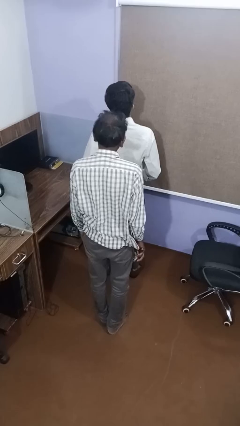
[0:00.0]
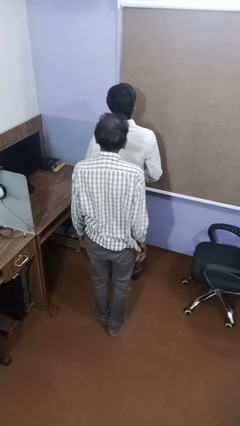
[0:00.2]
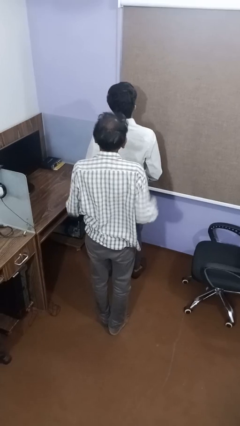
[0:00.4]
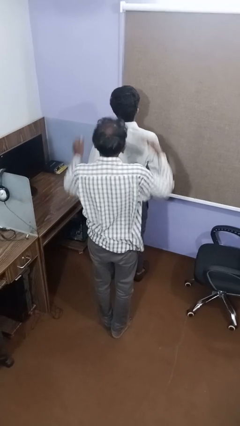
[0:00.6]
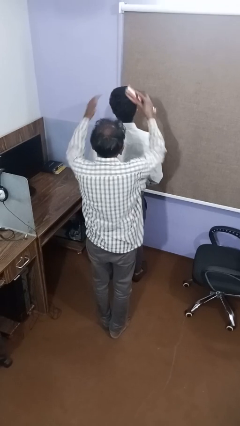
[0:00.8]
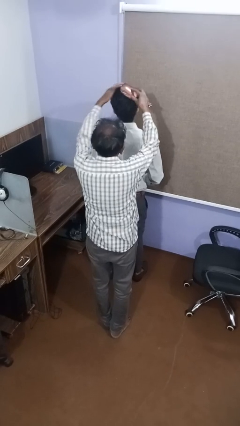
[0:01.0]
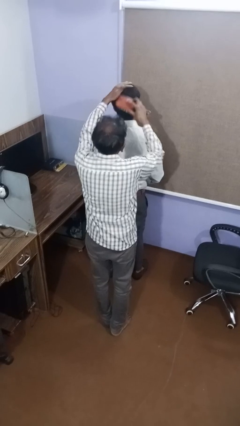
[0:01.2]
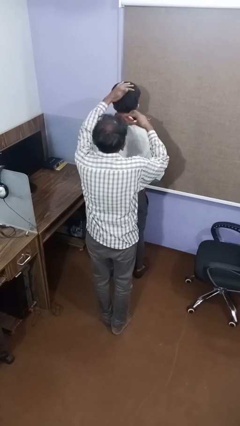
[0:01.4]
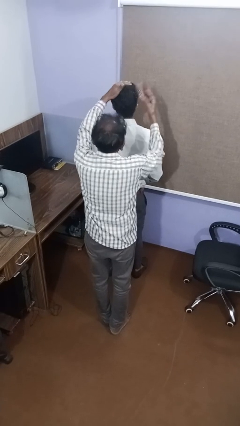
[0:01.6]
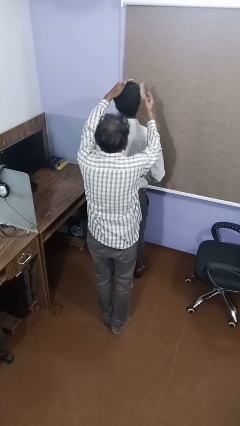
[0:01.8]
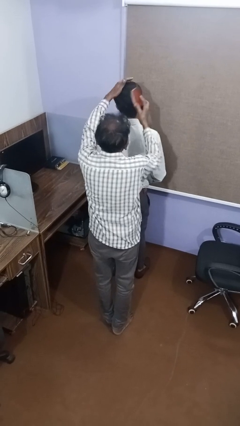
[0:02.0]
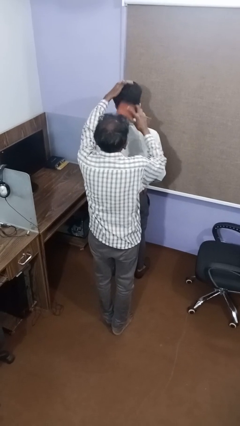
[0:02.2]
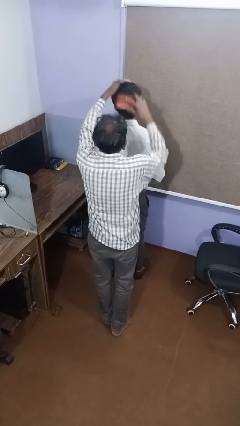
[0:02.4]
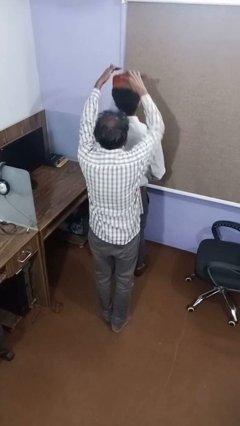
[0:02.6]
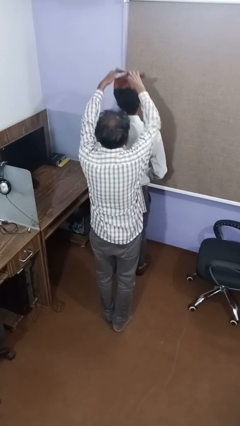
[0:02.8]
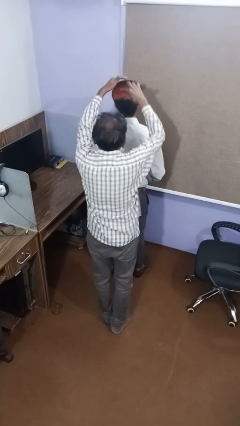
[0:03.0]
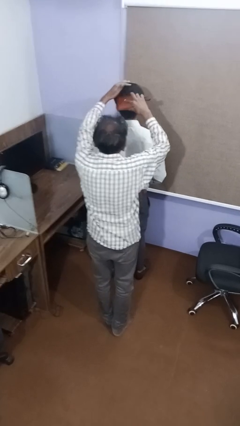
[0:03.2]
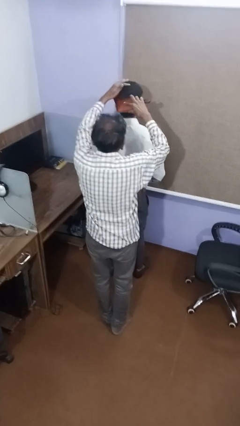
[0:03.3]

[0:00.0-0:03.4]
person brushes hair of person

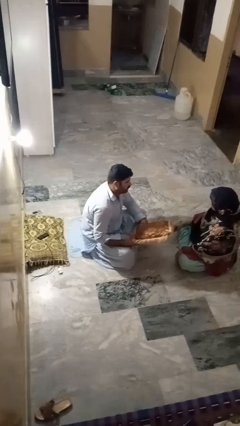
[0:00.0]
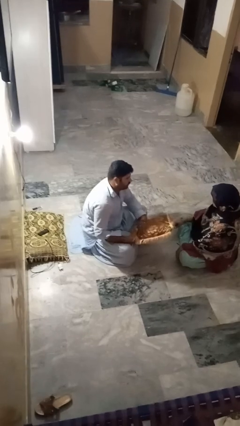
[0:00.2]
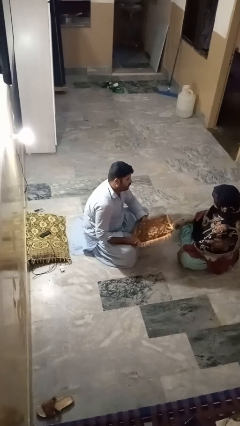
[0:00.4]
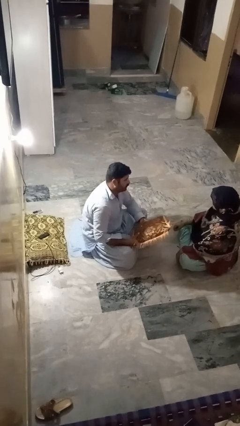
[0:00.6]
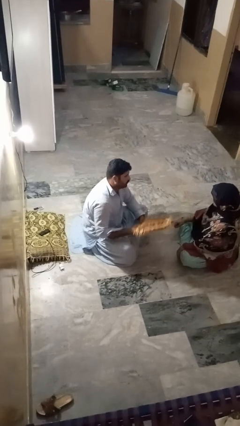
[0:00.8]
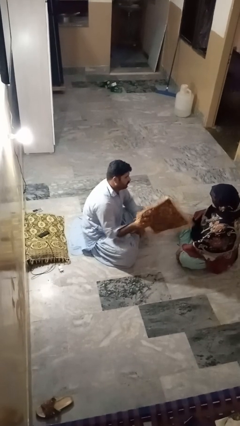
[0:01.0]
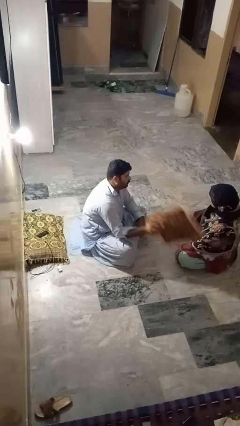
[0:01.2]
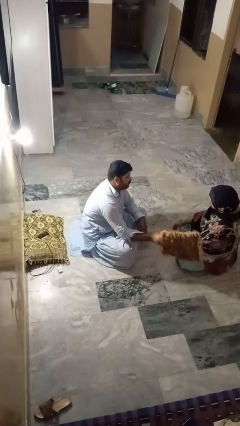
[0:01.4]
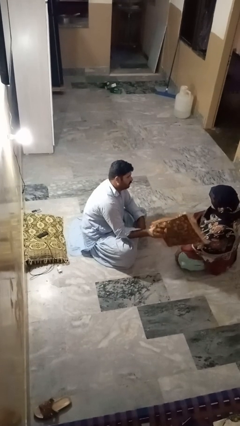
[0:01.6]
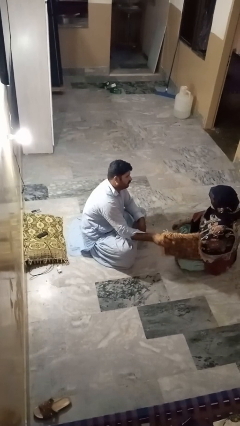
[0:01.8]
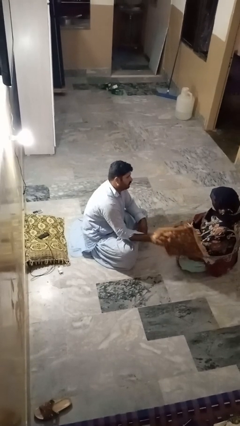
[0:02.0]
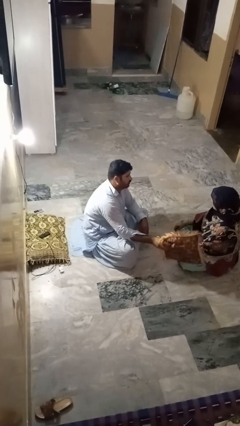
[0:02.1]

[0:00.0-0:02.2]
person hits person with pillow

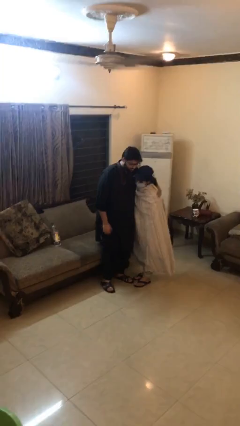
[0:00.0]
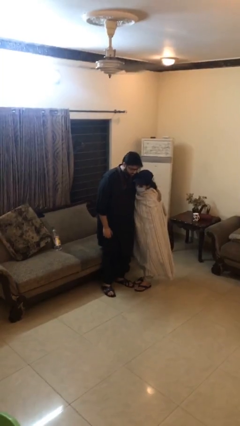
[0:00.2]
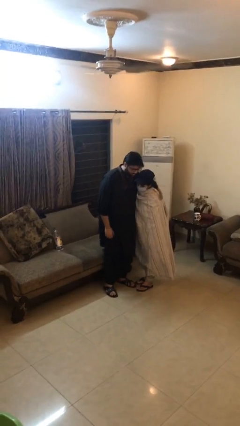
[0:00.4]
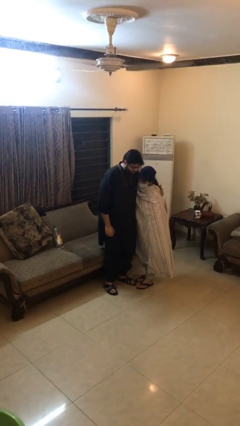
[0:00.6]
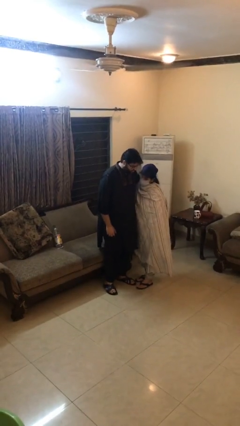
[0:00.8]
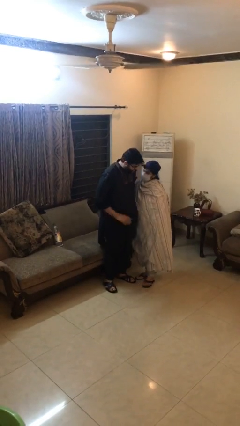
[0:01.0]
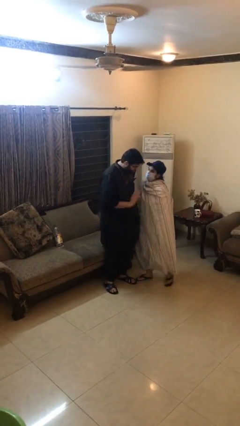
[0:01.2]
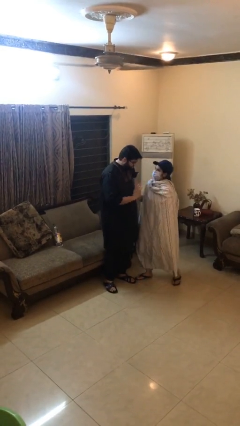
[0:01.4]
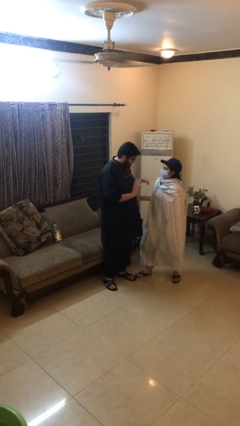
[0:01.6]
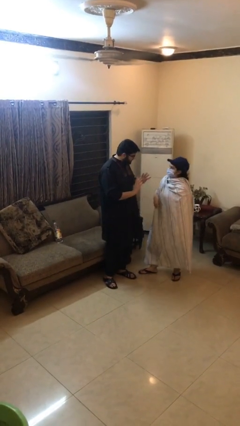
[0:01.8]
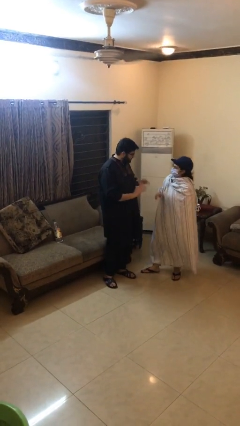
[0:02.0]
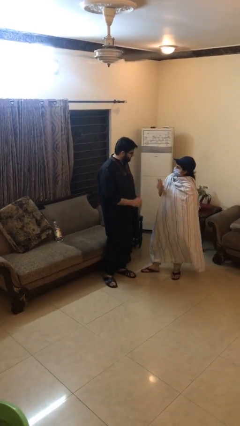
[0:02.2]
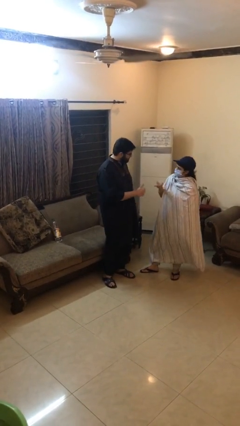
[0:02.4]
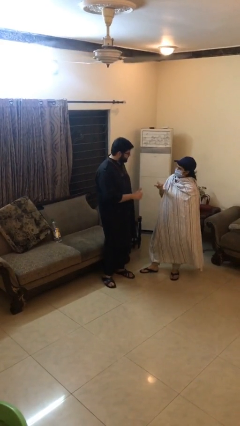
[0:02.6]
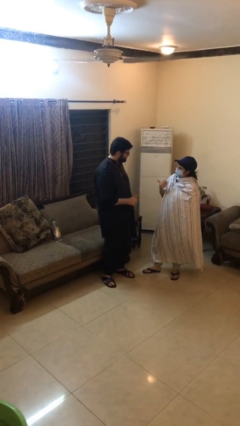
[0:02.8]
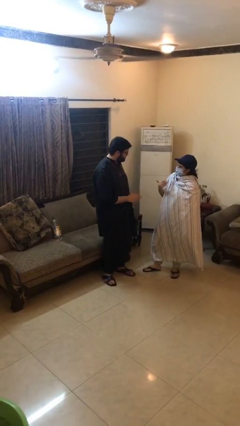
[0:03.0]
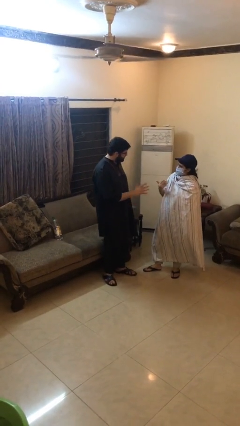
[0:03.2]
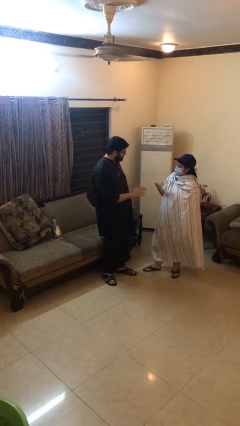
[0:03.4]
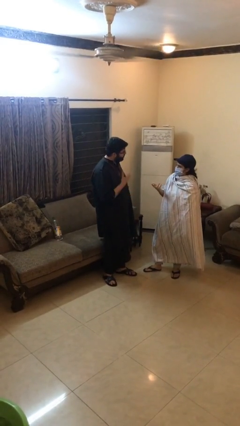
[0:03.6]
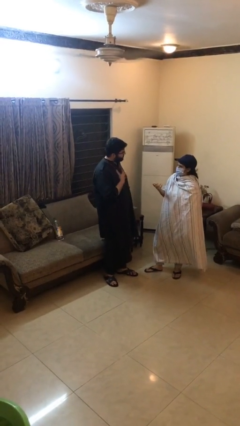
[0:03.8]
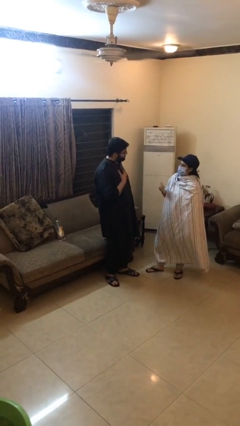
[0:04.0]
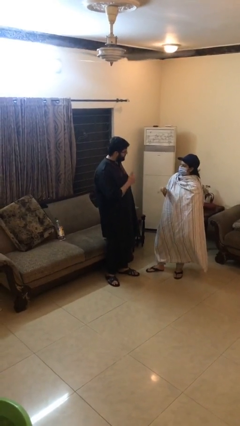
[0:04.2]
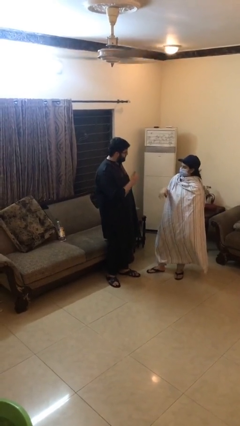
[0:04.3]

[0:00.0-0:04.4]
person talks to person

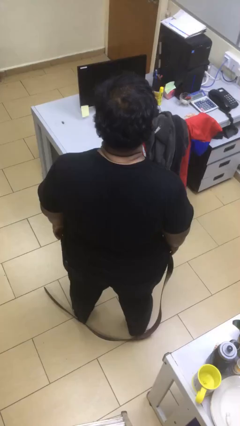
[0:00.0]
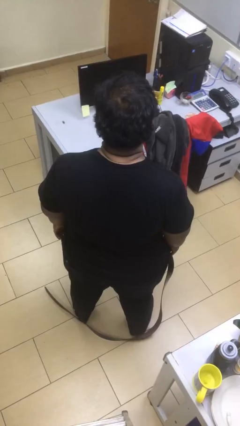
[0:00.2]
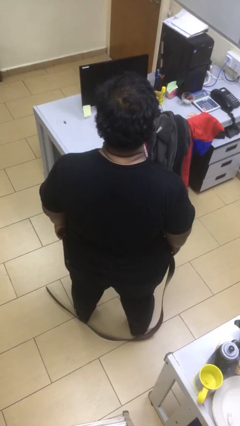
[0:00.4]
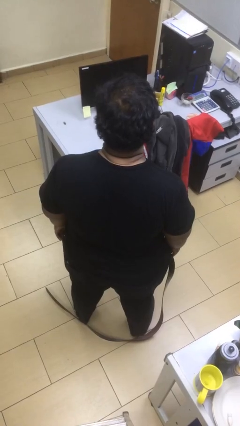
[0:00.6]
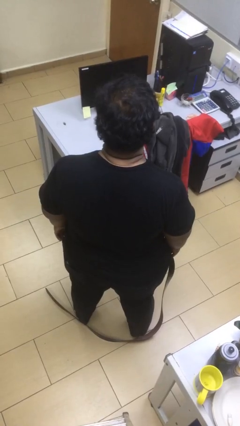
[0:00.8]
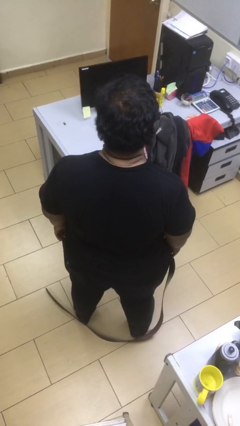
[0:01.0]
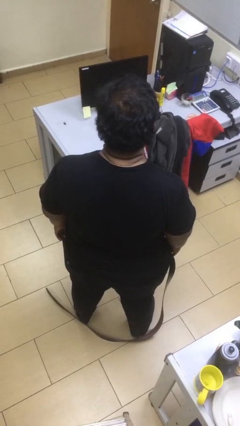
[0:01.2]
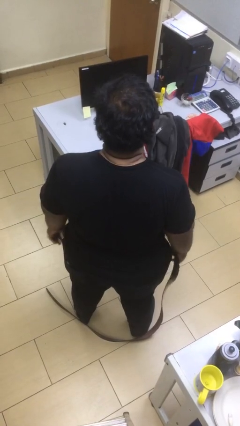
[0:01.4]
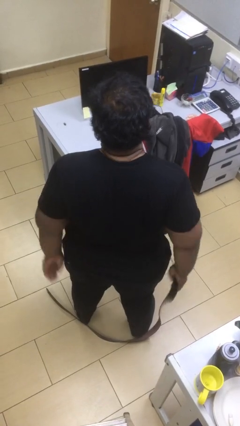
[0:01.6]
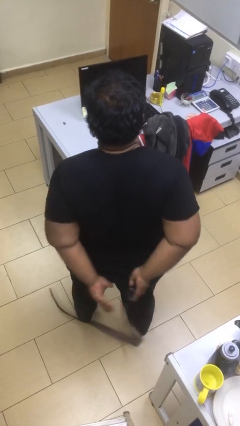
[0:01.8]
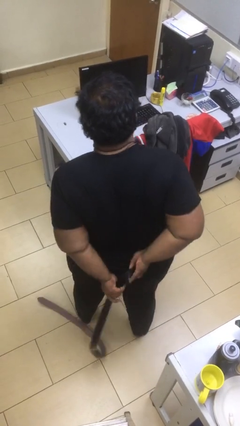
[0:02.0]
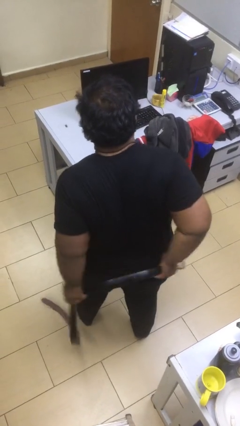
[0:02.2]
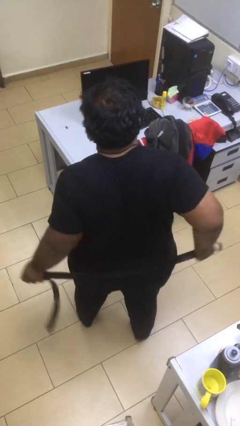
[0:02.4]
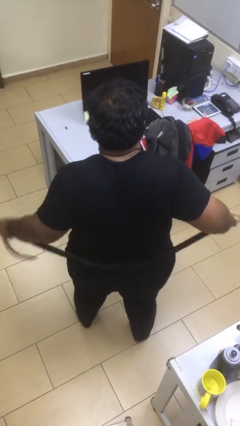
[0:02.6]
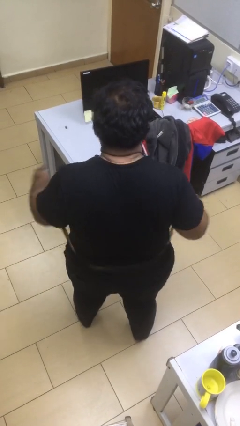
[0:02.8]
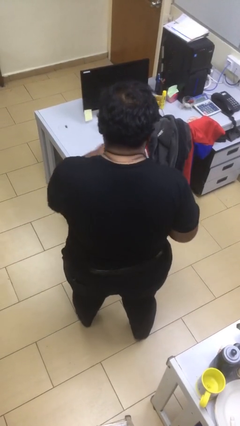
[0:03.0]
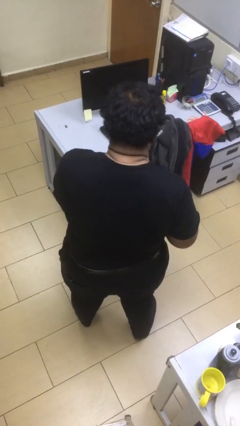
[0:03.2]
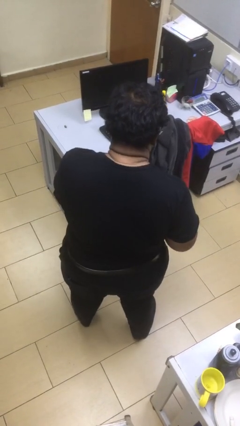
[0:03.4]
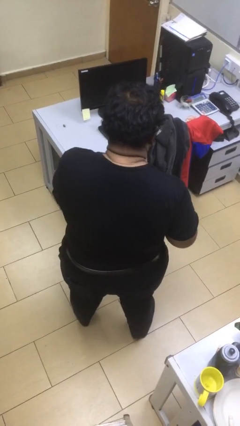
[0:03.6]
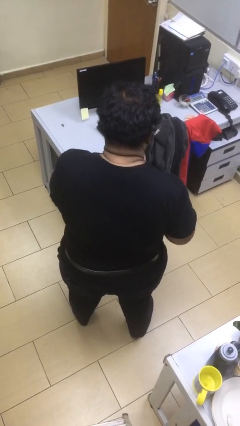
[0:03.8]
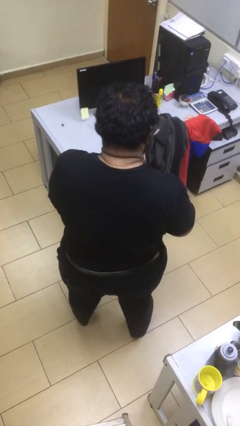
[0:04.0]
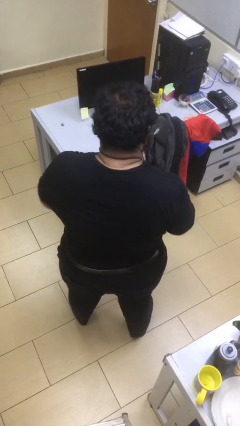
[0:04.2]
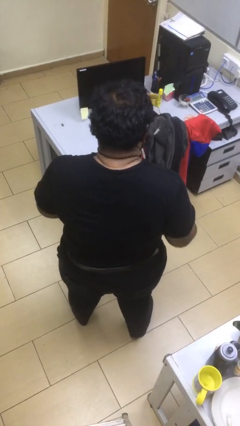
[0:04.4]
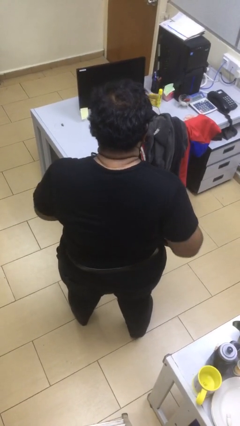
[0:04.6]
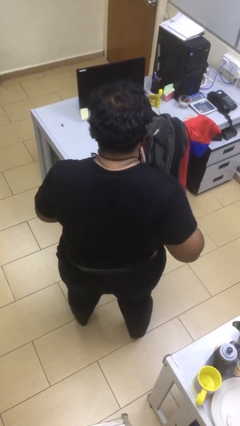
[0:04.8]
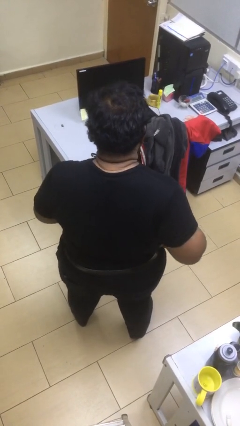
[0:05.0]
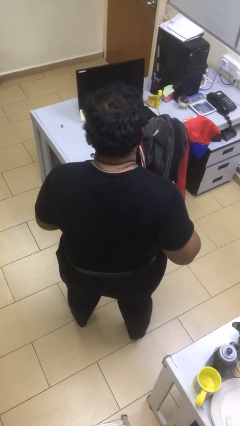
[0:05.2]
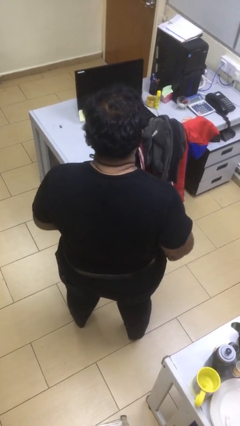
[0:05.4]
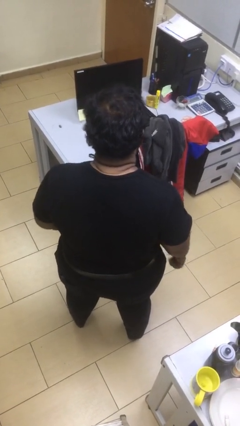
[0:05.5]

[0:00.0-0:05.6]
person puts on belt

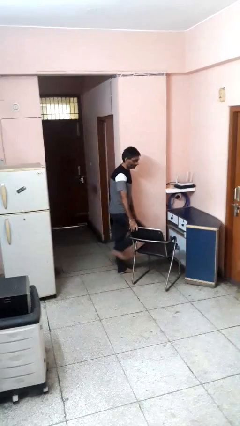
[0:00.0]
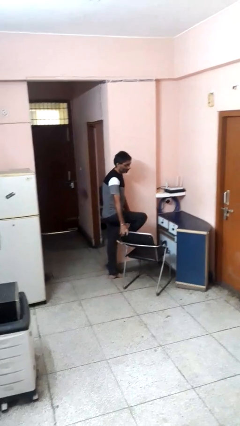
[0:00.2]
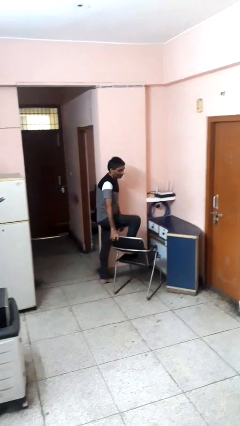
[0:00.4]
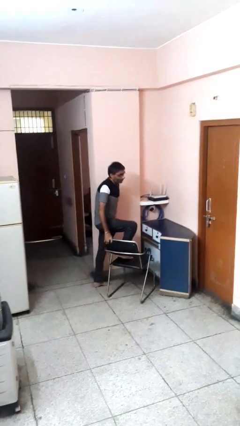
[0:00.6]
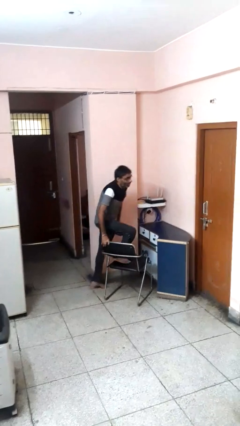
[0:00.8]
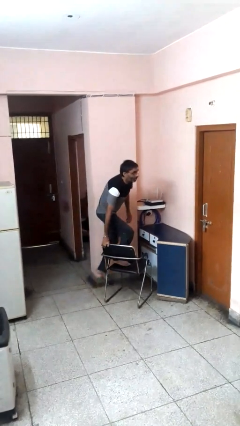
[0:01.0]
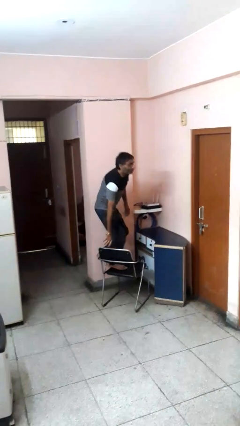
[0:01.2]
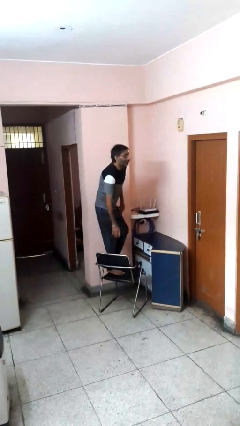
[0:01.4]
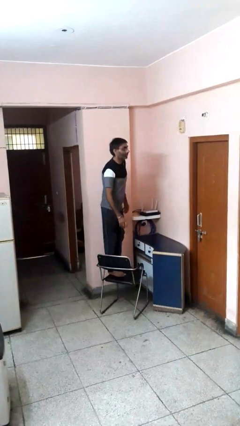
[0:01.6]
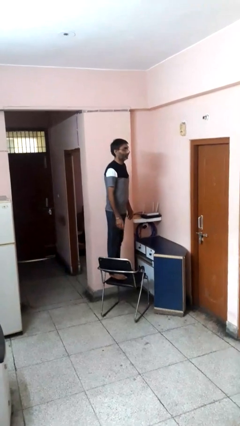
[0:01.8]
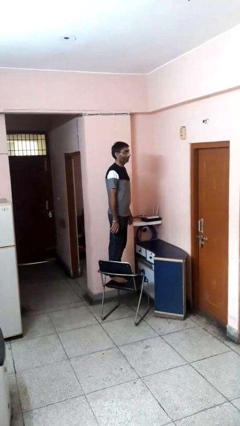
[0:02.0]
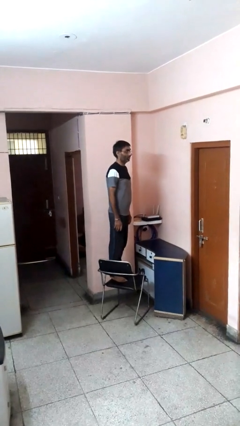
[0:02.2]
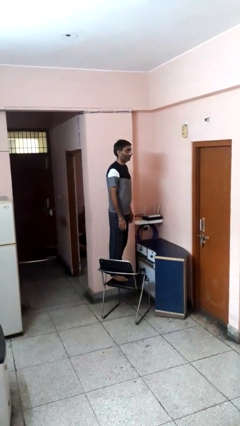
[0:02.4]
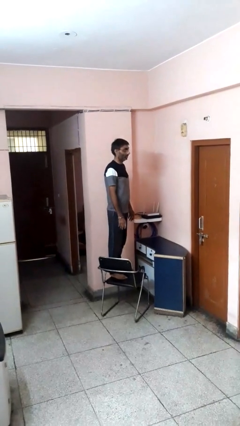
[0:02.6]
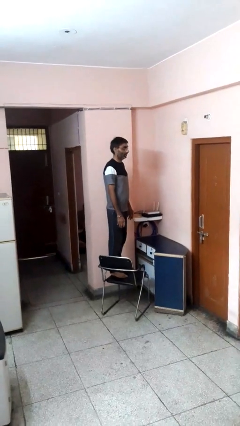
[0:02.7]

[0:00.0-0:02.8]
person climbs on chair
